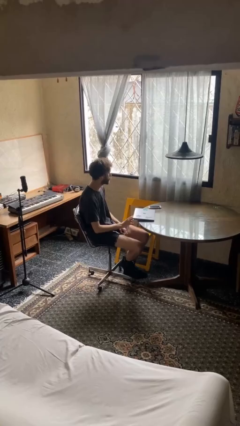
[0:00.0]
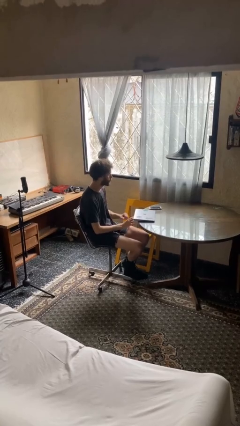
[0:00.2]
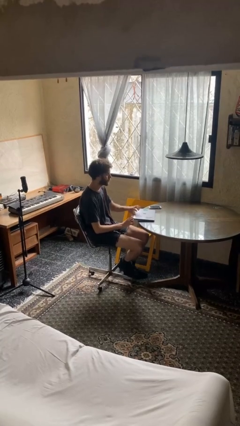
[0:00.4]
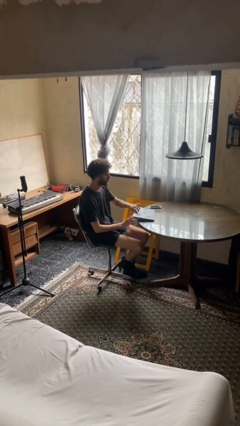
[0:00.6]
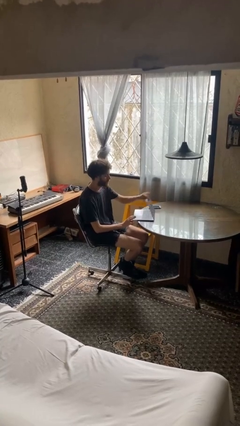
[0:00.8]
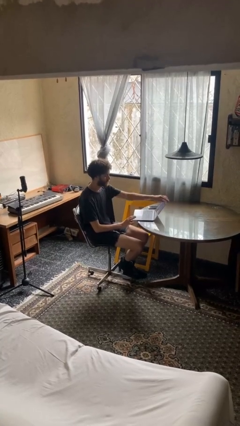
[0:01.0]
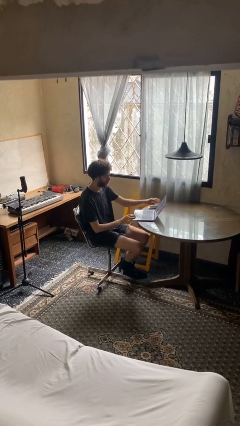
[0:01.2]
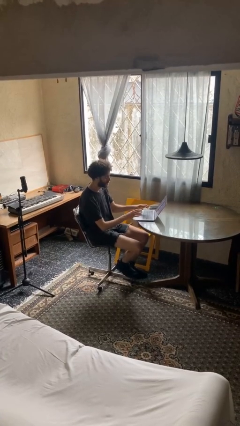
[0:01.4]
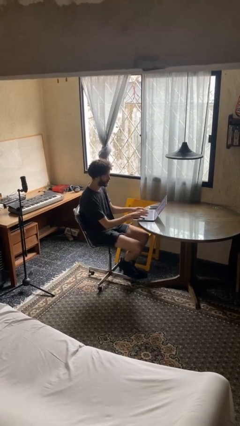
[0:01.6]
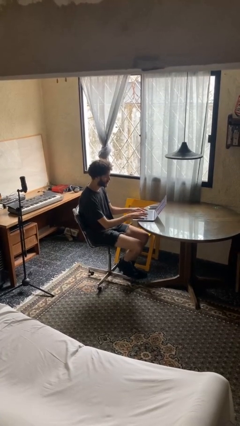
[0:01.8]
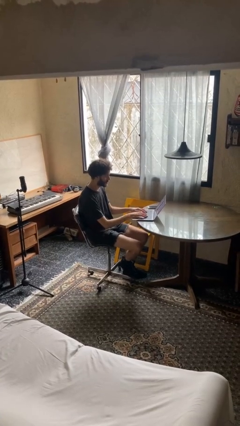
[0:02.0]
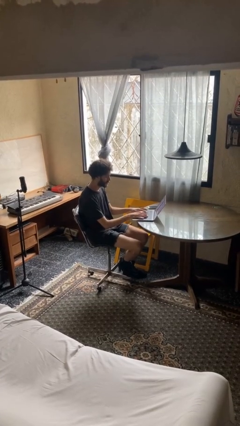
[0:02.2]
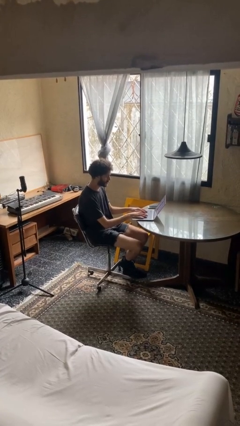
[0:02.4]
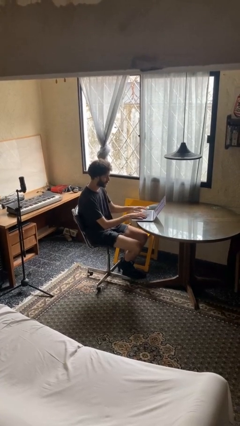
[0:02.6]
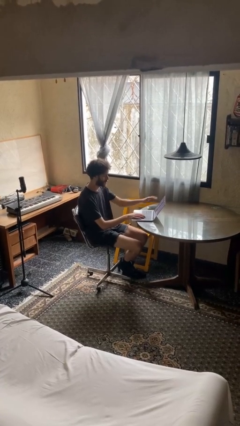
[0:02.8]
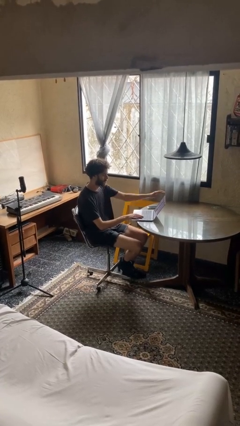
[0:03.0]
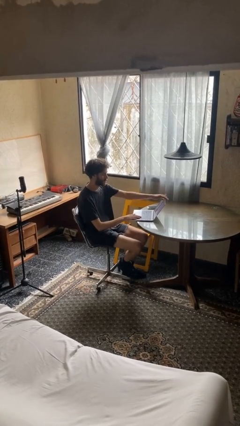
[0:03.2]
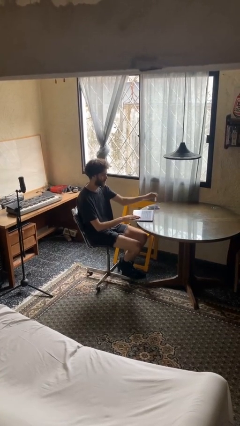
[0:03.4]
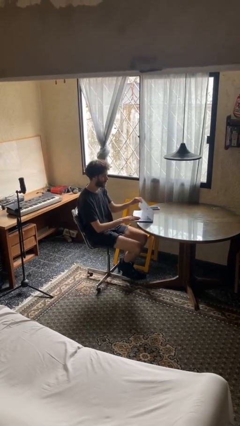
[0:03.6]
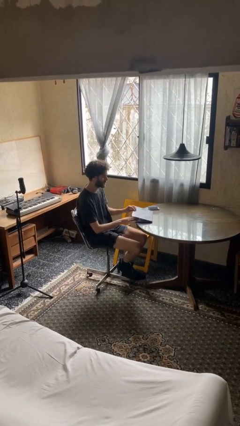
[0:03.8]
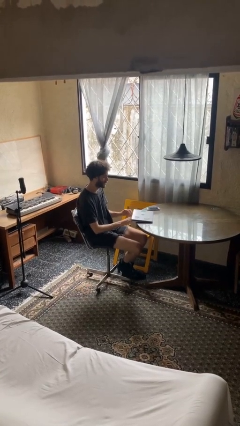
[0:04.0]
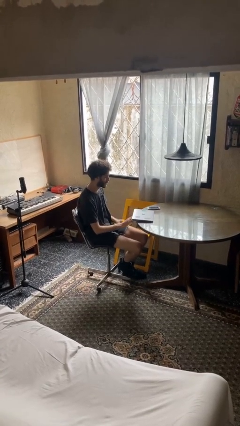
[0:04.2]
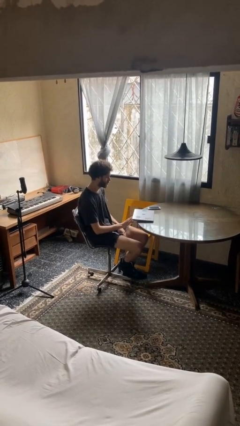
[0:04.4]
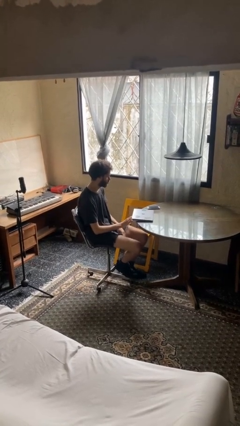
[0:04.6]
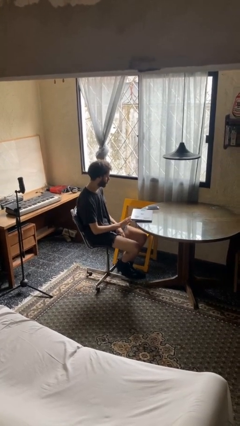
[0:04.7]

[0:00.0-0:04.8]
person interacts with laptop

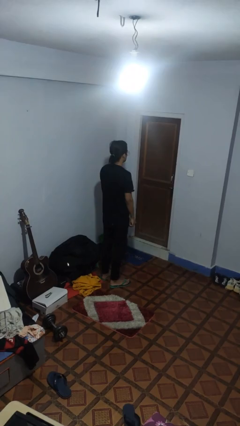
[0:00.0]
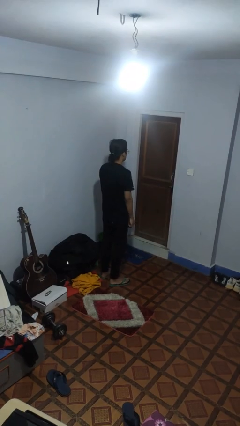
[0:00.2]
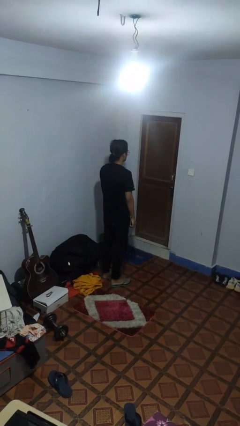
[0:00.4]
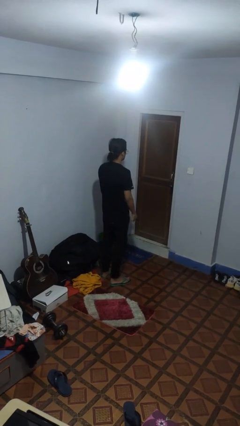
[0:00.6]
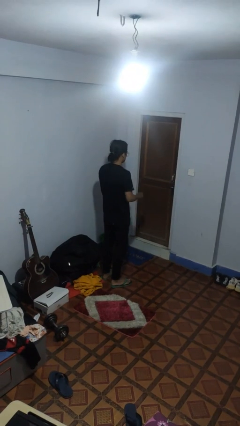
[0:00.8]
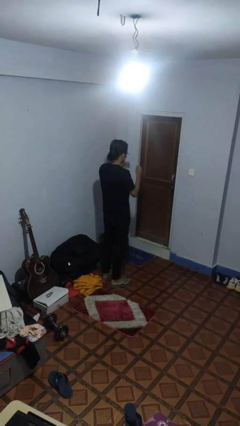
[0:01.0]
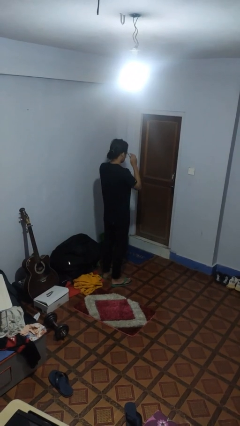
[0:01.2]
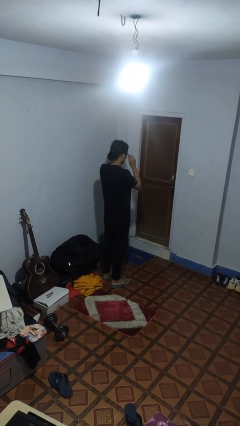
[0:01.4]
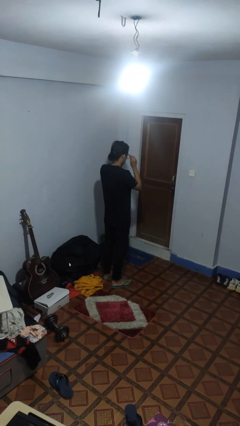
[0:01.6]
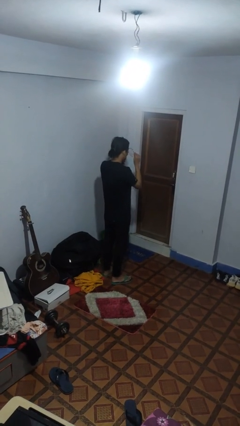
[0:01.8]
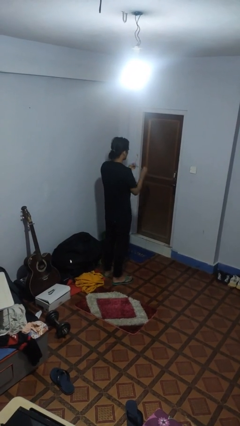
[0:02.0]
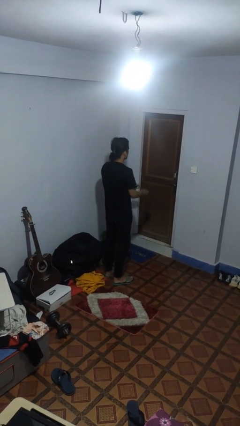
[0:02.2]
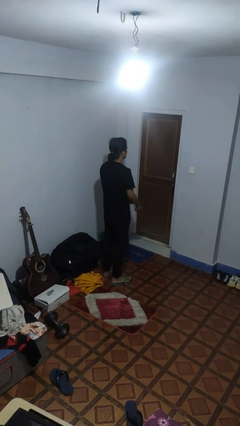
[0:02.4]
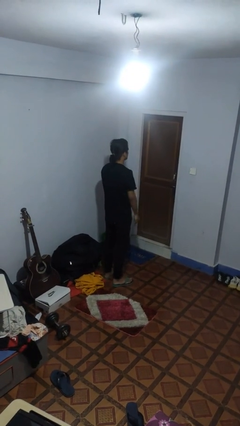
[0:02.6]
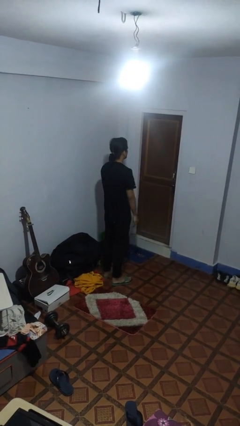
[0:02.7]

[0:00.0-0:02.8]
person takes off glasses

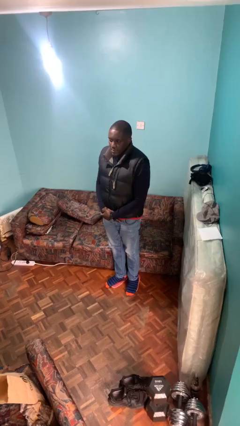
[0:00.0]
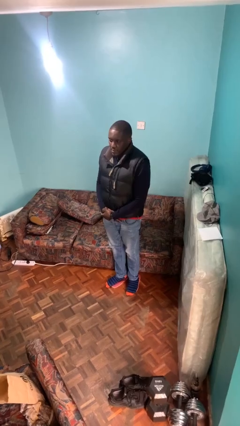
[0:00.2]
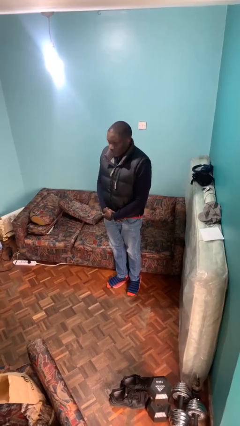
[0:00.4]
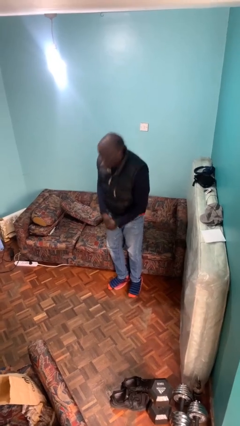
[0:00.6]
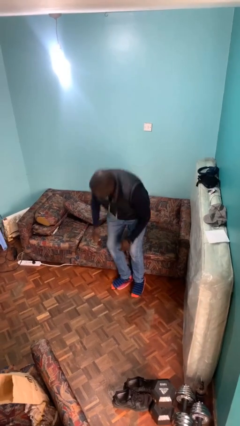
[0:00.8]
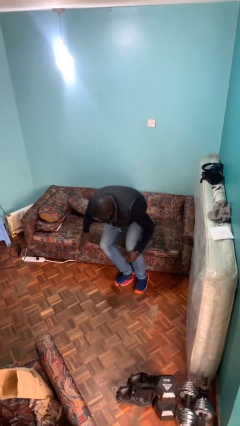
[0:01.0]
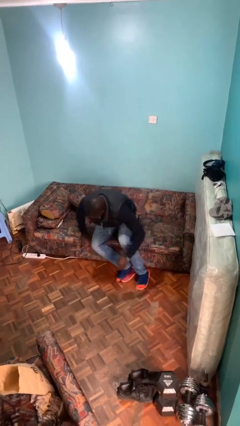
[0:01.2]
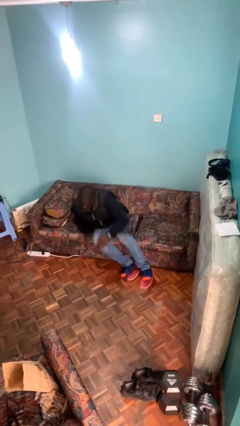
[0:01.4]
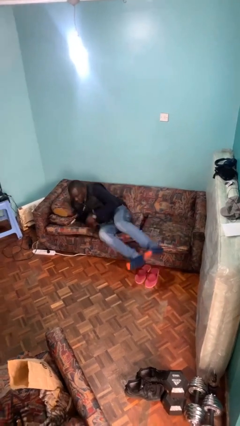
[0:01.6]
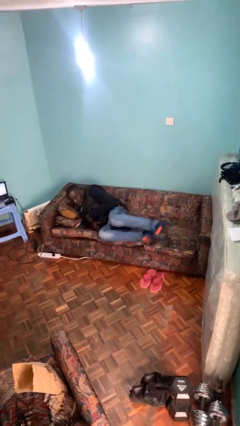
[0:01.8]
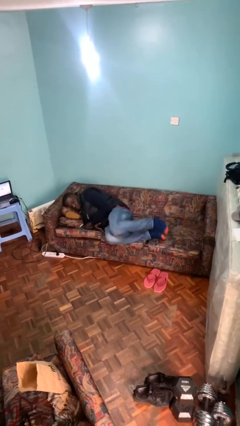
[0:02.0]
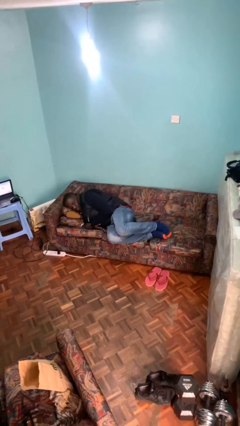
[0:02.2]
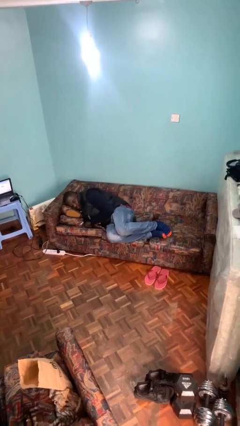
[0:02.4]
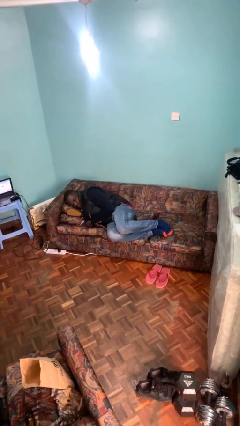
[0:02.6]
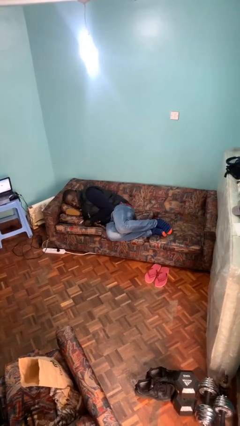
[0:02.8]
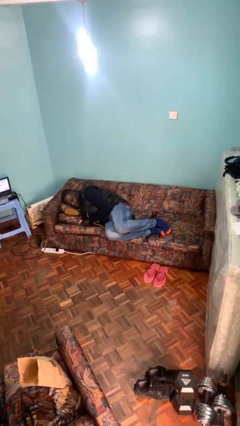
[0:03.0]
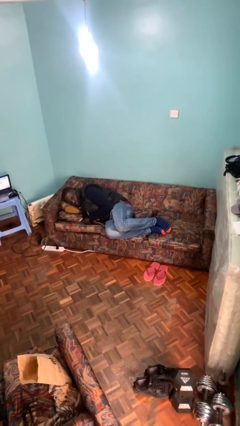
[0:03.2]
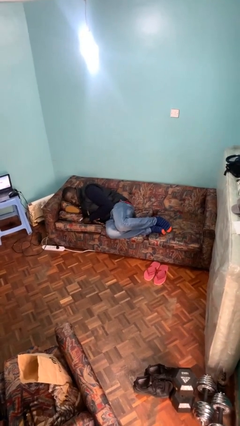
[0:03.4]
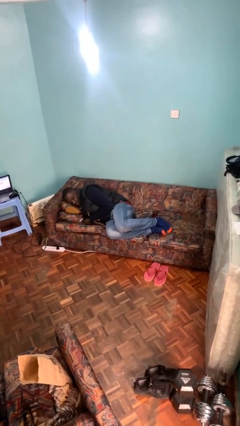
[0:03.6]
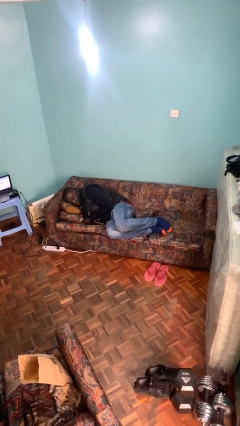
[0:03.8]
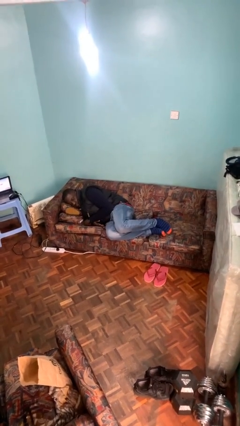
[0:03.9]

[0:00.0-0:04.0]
person lies down on couch

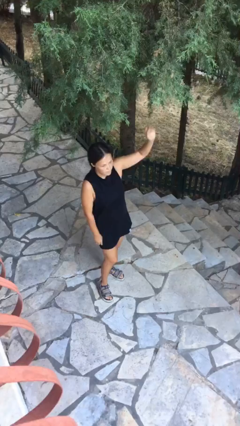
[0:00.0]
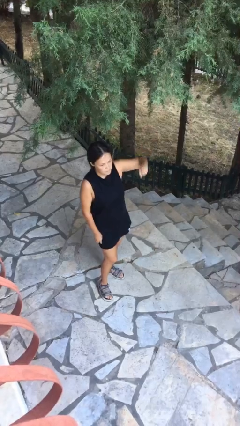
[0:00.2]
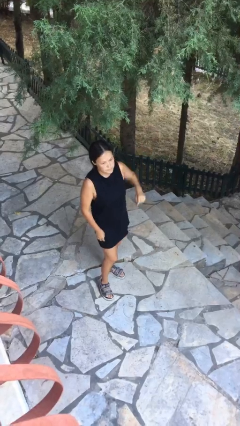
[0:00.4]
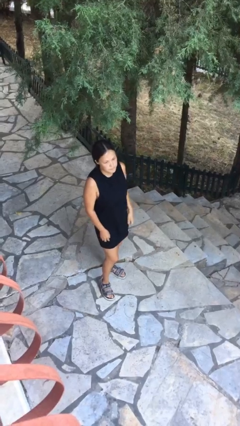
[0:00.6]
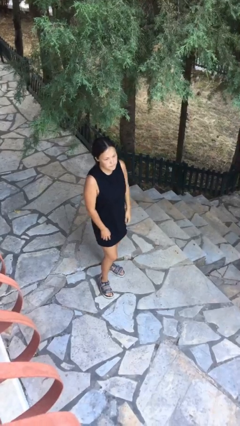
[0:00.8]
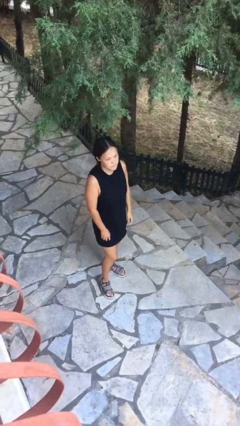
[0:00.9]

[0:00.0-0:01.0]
person gestures lower hand

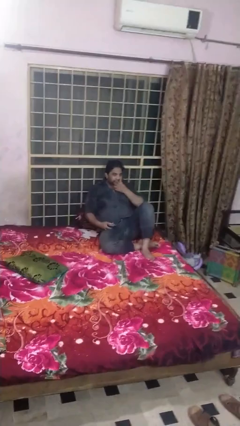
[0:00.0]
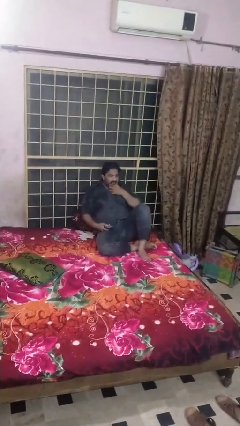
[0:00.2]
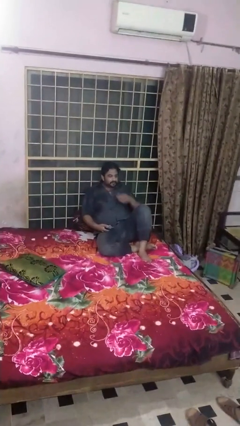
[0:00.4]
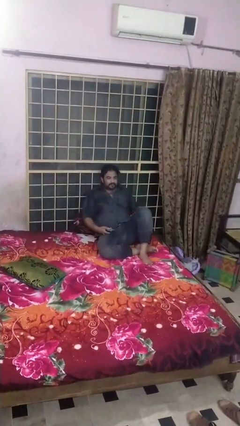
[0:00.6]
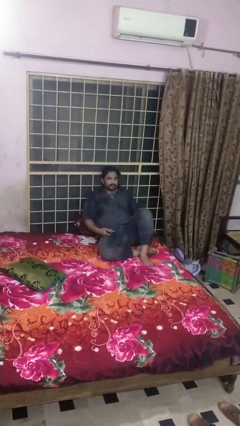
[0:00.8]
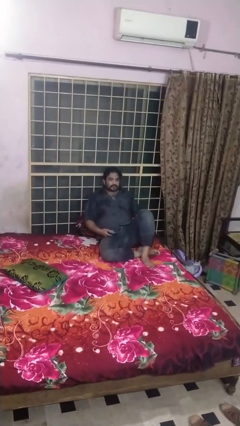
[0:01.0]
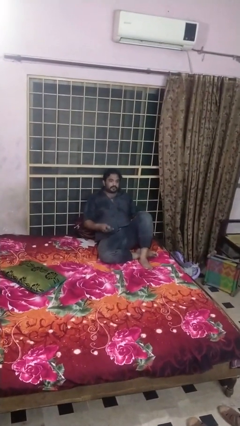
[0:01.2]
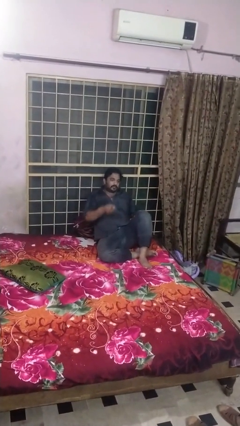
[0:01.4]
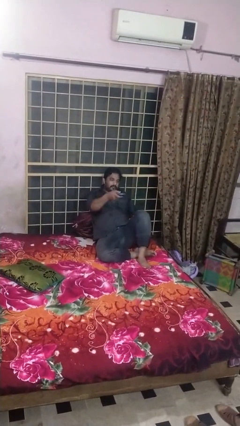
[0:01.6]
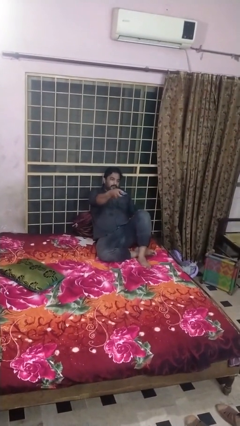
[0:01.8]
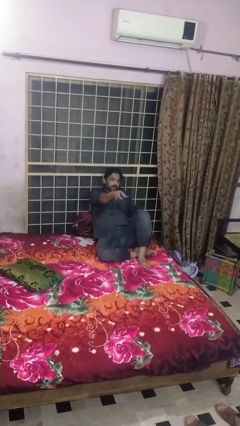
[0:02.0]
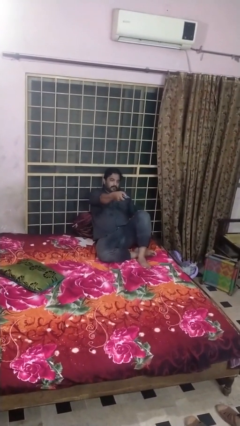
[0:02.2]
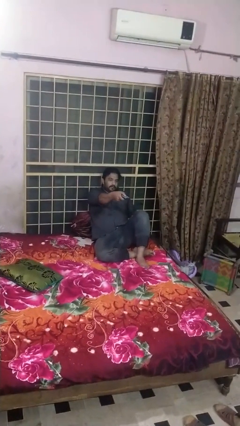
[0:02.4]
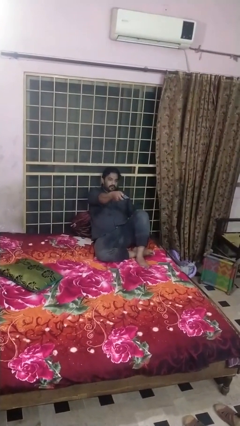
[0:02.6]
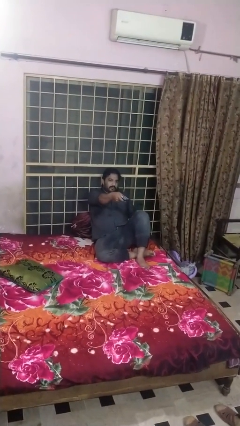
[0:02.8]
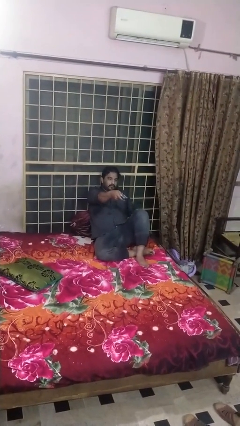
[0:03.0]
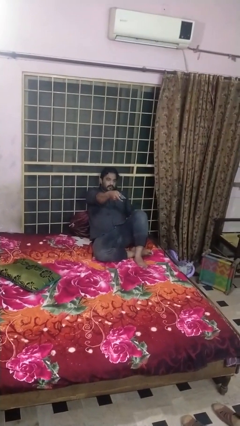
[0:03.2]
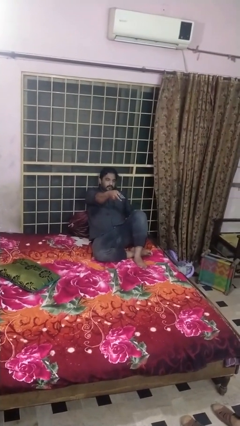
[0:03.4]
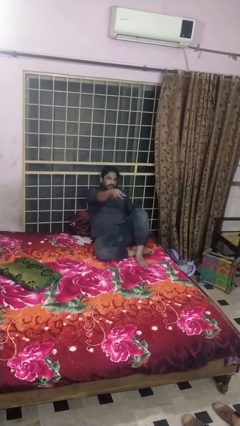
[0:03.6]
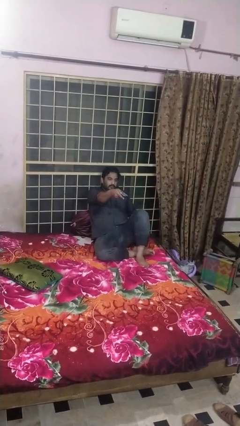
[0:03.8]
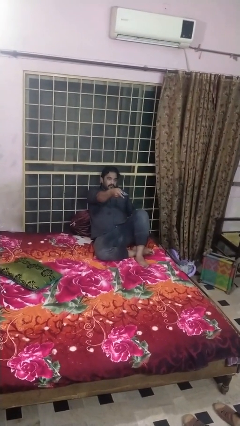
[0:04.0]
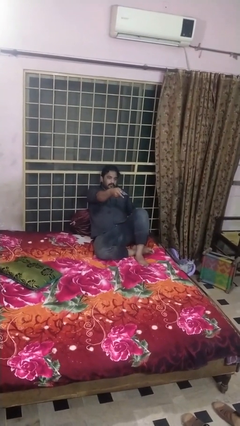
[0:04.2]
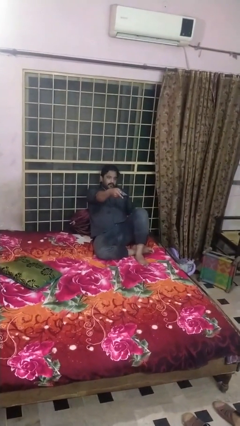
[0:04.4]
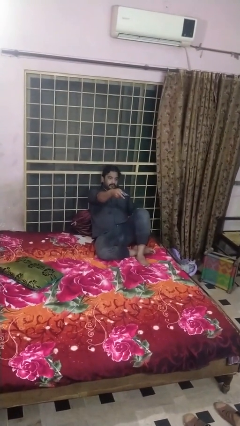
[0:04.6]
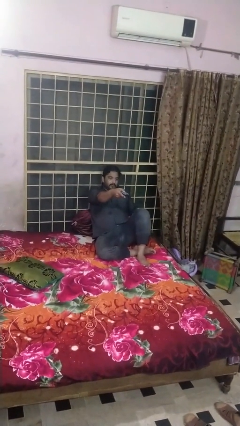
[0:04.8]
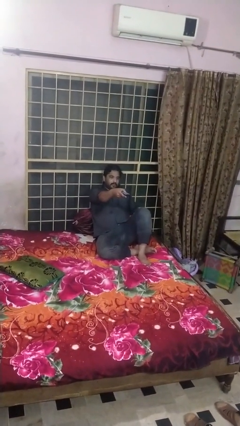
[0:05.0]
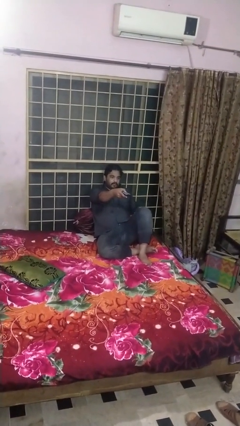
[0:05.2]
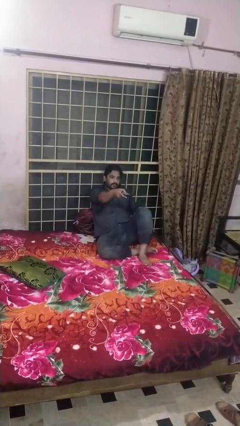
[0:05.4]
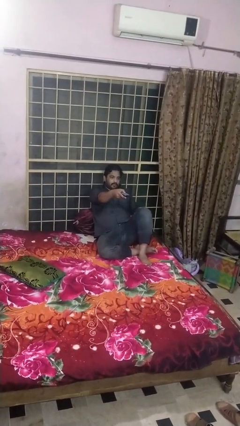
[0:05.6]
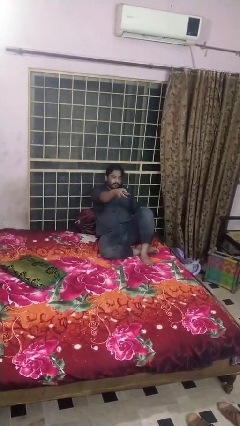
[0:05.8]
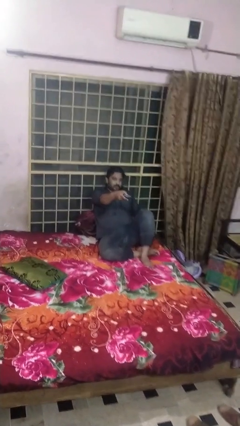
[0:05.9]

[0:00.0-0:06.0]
person uses television remote
